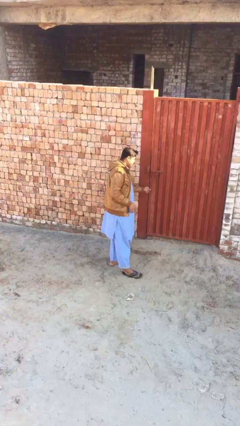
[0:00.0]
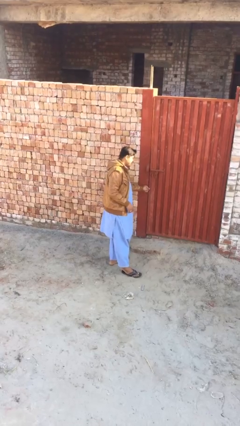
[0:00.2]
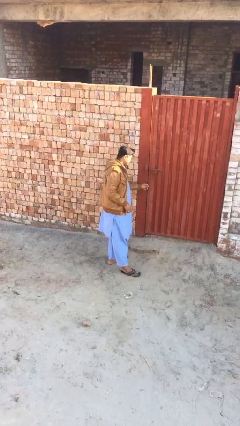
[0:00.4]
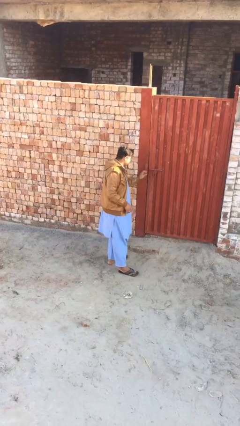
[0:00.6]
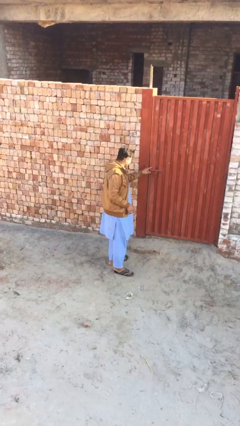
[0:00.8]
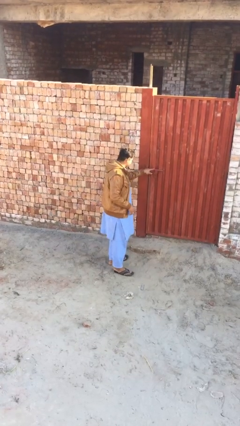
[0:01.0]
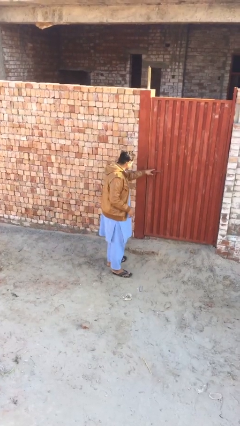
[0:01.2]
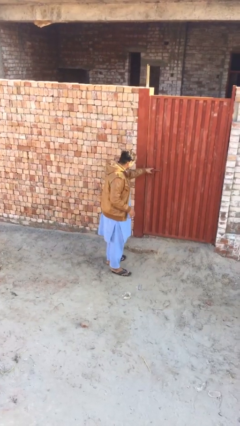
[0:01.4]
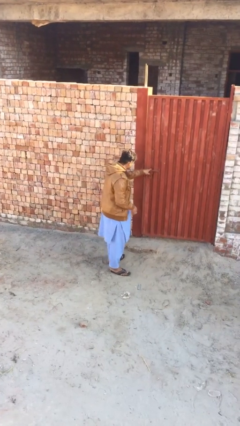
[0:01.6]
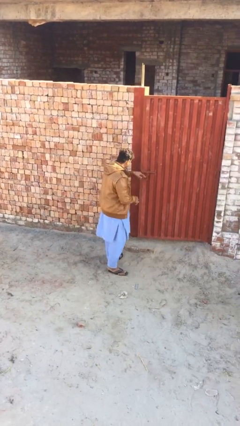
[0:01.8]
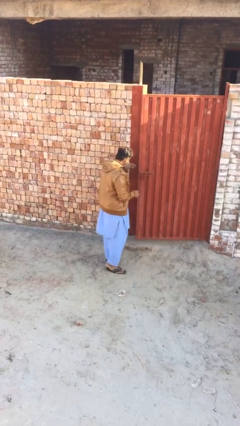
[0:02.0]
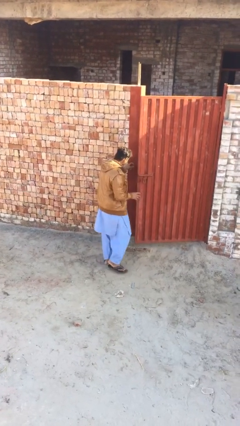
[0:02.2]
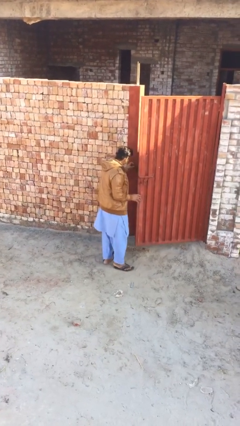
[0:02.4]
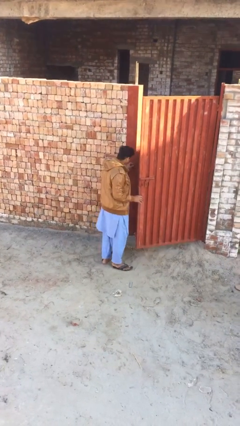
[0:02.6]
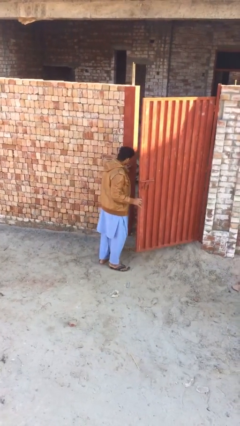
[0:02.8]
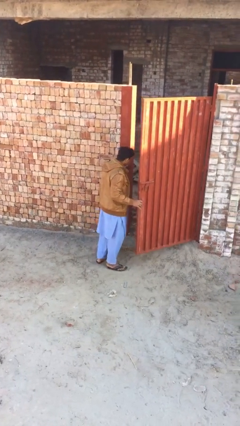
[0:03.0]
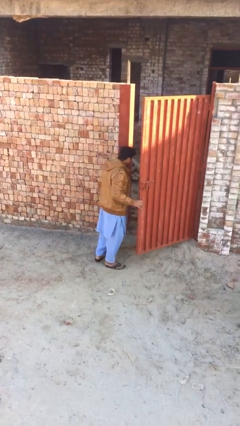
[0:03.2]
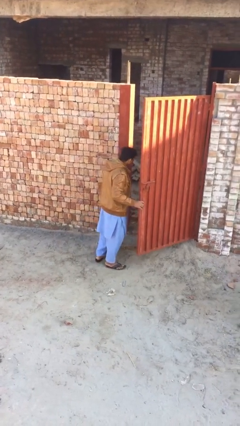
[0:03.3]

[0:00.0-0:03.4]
person opens facility door

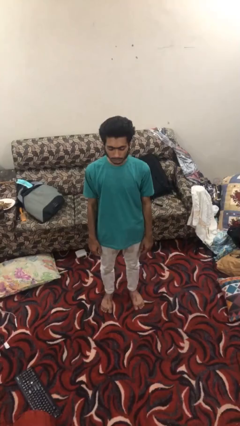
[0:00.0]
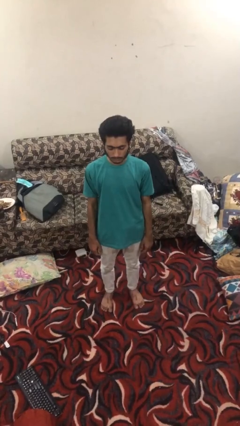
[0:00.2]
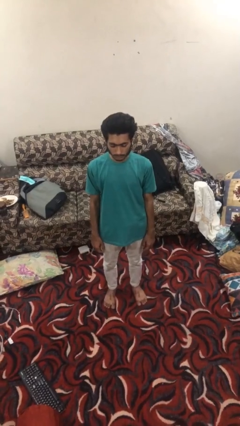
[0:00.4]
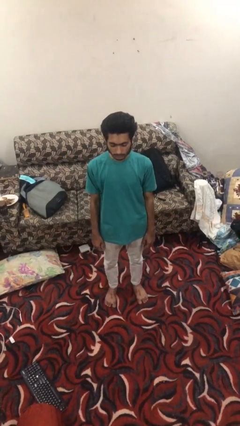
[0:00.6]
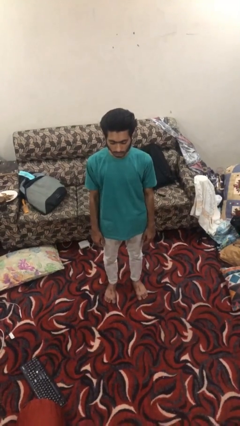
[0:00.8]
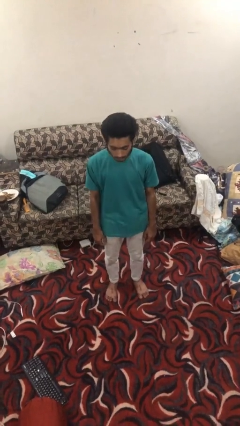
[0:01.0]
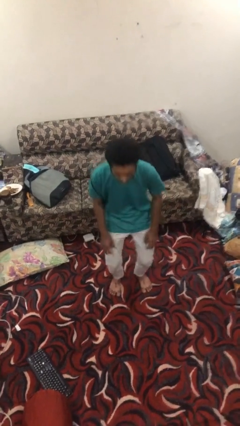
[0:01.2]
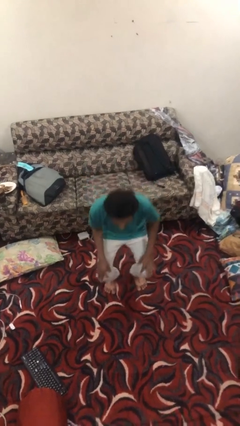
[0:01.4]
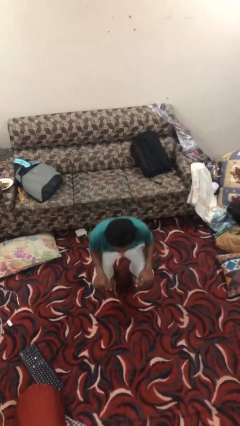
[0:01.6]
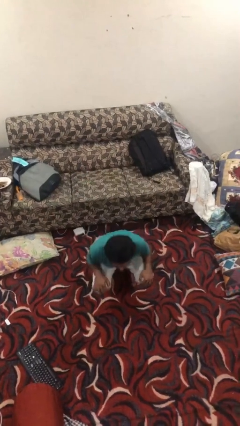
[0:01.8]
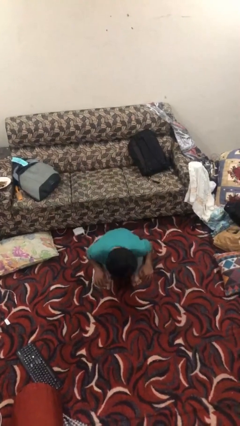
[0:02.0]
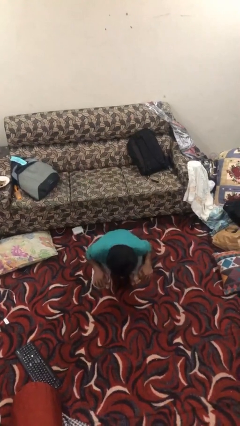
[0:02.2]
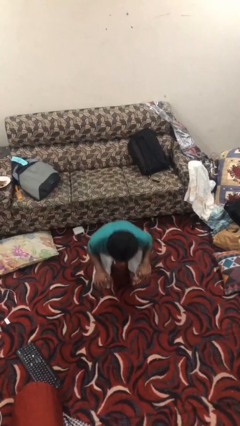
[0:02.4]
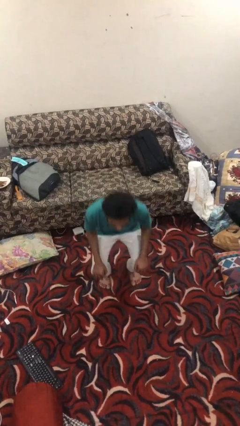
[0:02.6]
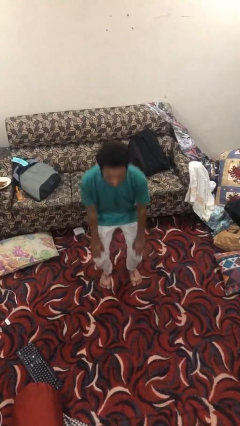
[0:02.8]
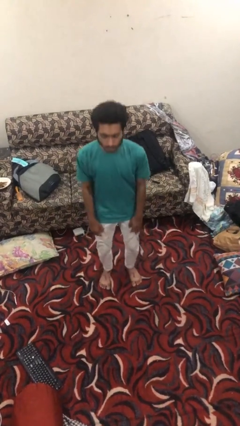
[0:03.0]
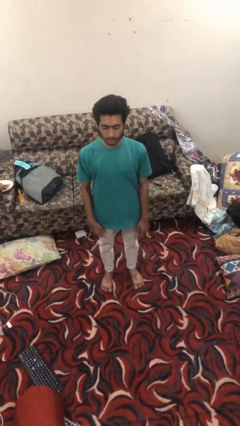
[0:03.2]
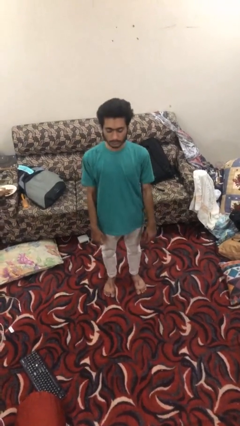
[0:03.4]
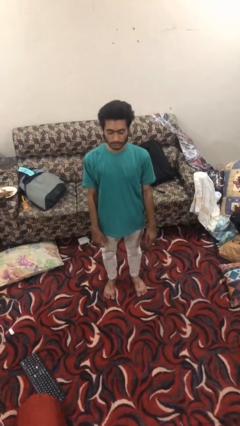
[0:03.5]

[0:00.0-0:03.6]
person exercises with situp

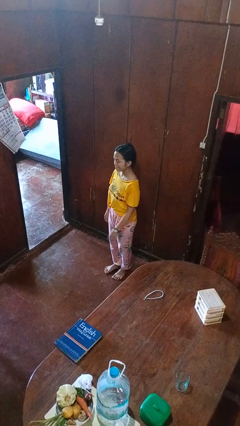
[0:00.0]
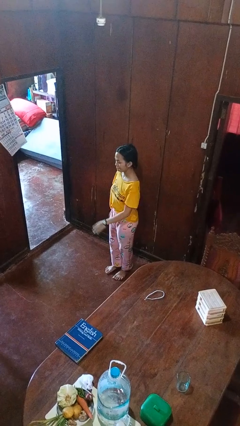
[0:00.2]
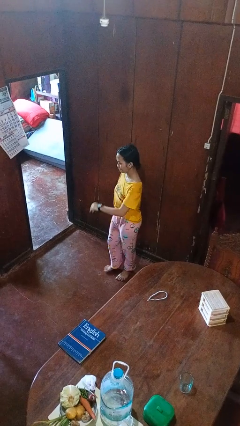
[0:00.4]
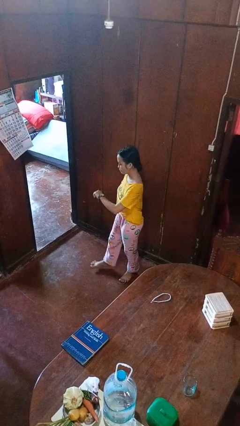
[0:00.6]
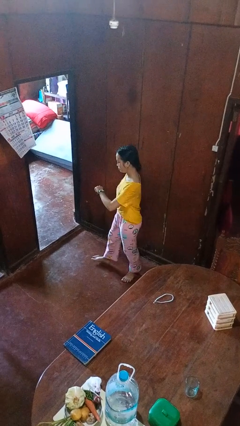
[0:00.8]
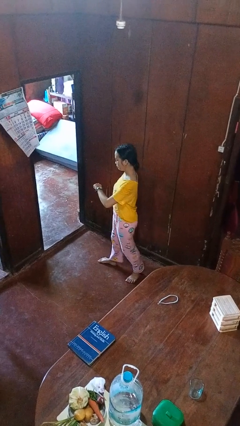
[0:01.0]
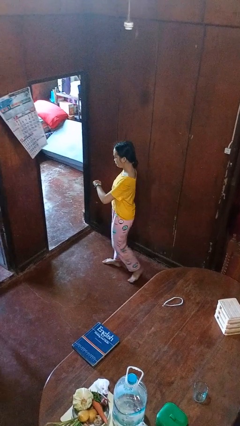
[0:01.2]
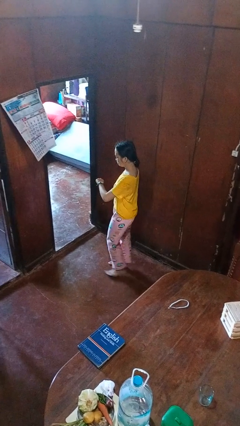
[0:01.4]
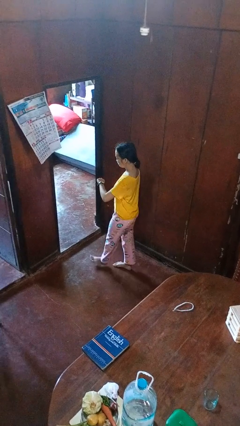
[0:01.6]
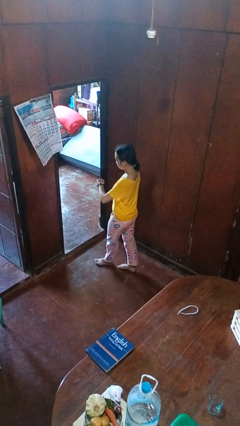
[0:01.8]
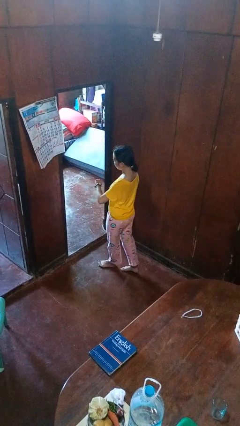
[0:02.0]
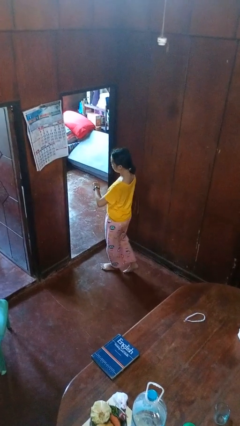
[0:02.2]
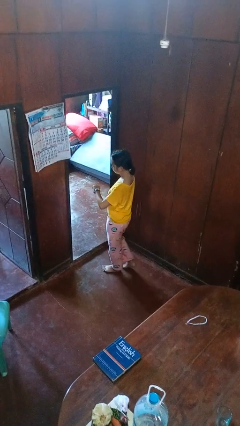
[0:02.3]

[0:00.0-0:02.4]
person looks at wristwatch

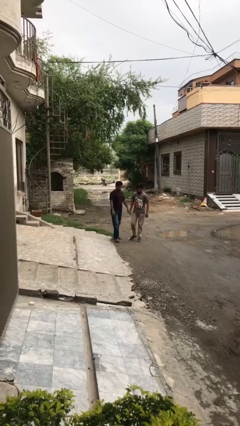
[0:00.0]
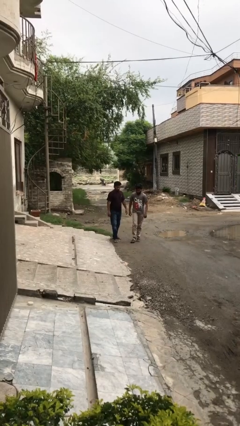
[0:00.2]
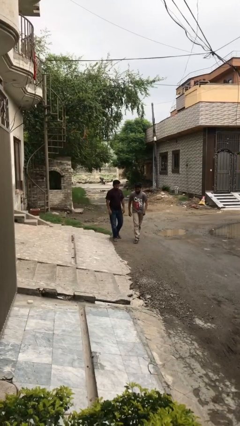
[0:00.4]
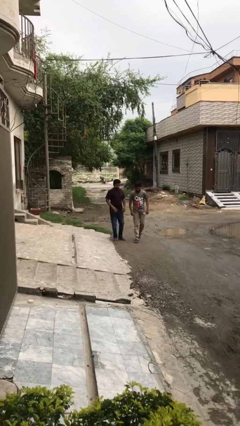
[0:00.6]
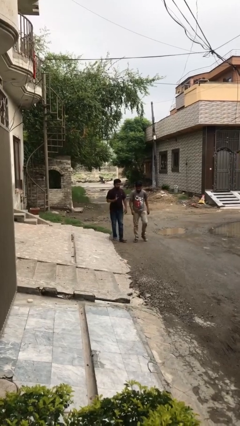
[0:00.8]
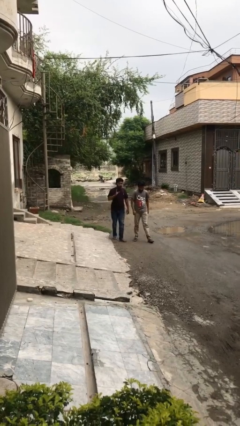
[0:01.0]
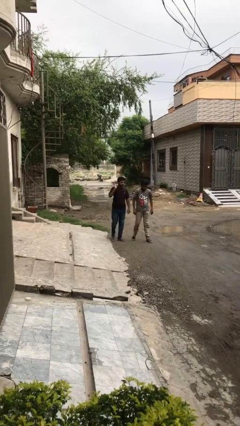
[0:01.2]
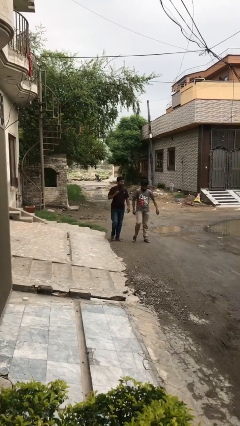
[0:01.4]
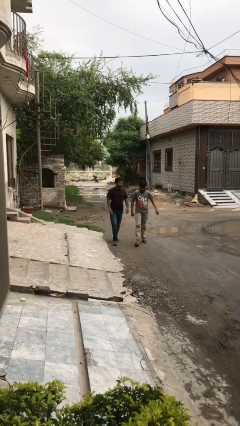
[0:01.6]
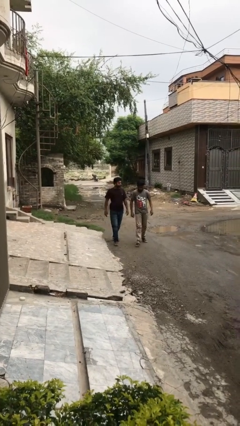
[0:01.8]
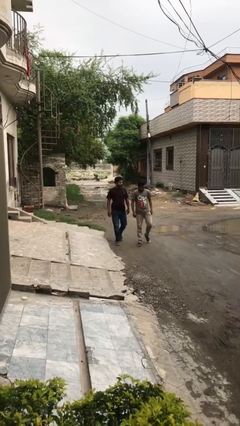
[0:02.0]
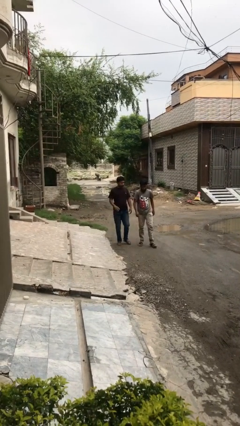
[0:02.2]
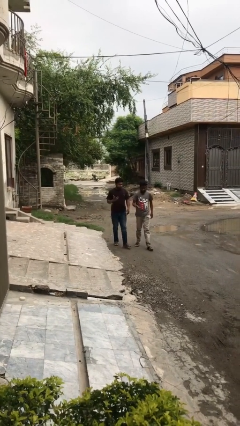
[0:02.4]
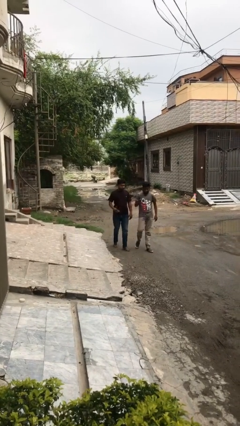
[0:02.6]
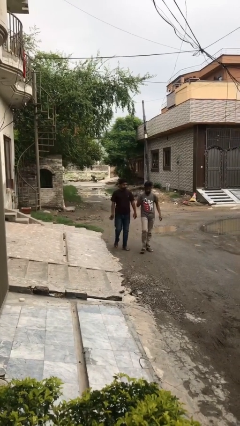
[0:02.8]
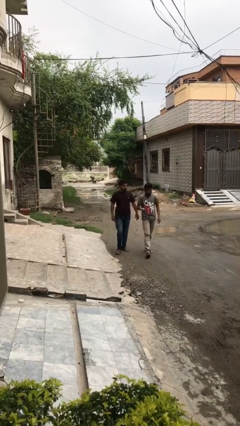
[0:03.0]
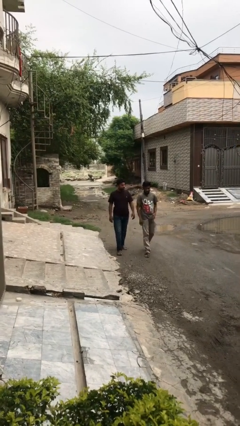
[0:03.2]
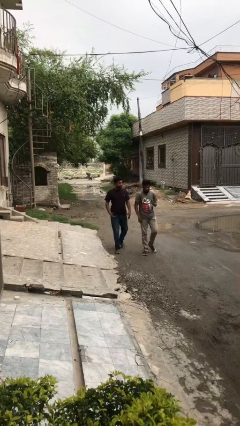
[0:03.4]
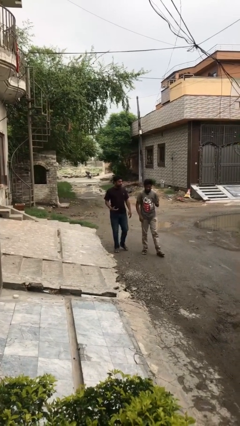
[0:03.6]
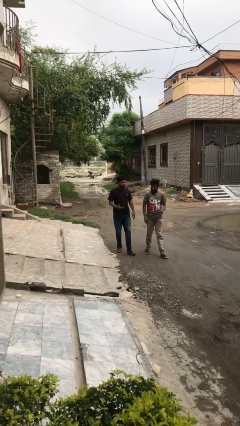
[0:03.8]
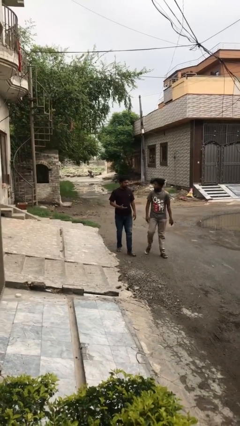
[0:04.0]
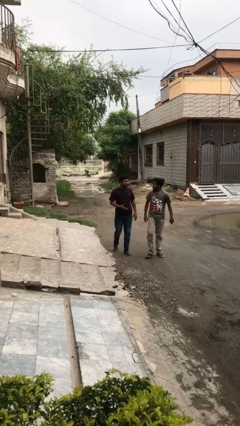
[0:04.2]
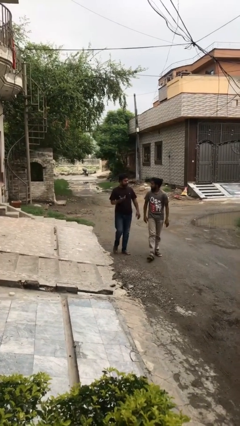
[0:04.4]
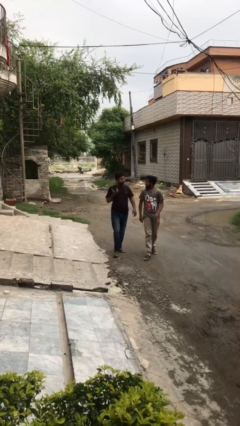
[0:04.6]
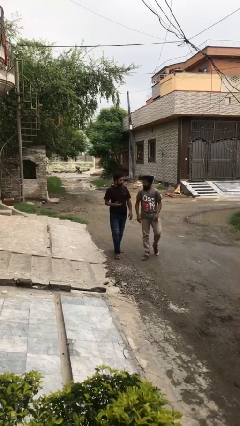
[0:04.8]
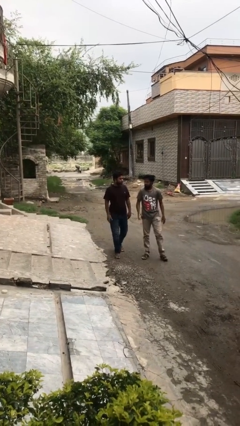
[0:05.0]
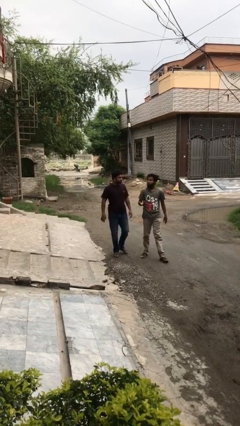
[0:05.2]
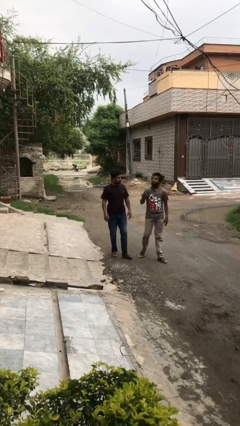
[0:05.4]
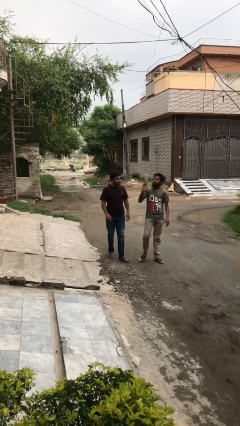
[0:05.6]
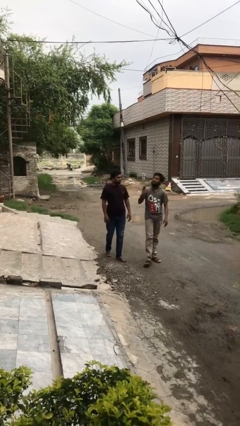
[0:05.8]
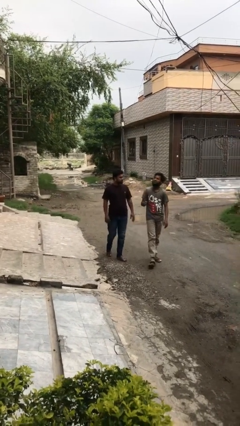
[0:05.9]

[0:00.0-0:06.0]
person talks to person

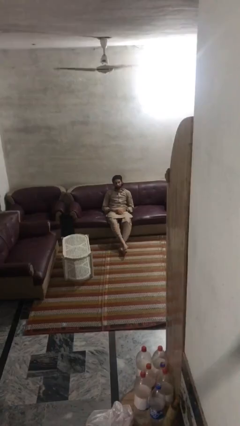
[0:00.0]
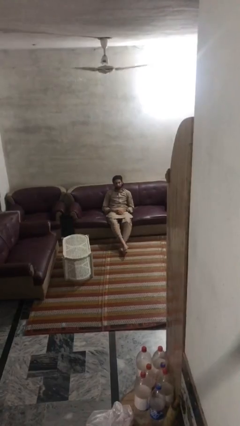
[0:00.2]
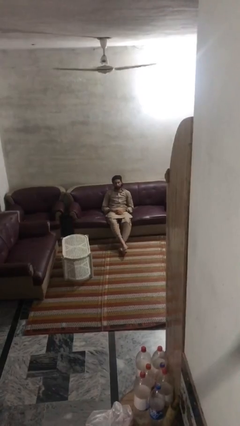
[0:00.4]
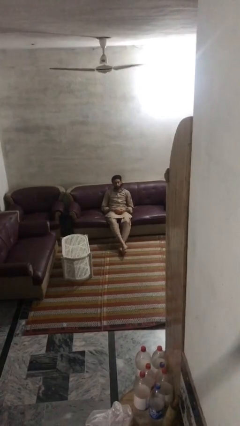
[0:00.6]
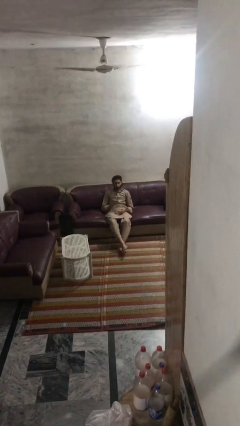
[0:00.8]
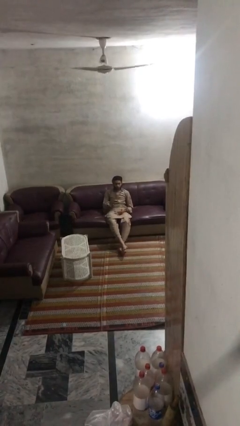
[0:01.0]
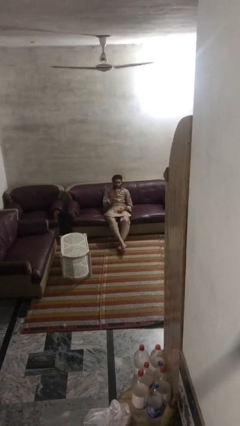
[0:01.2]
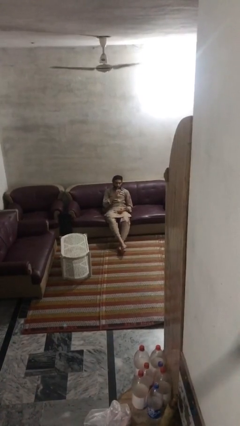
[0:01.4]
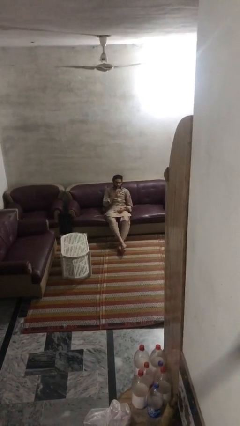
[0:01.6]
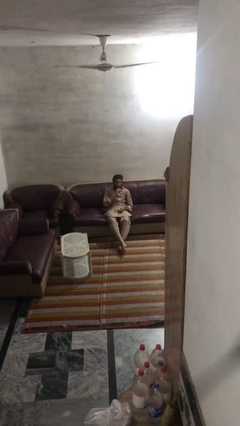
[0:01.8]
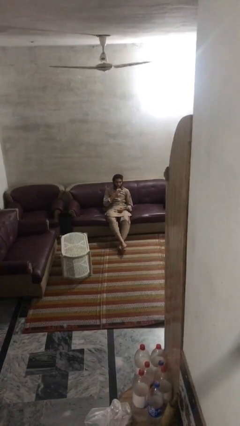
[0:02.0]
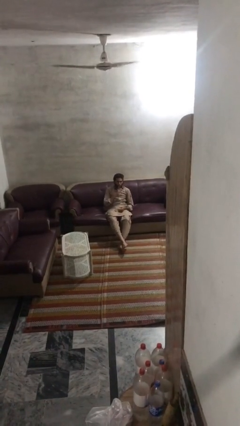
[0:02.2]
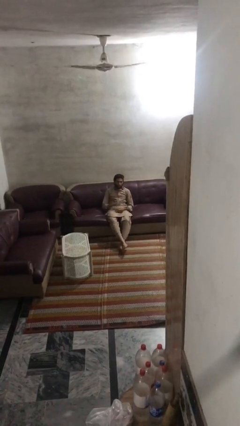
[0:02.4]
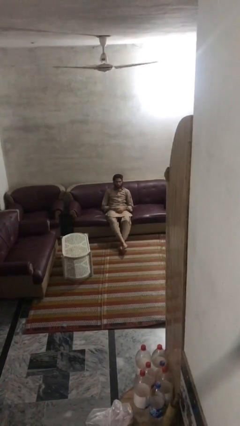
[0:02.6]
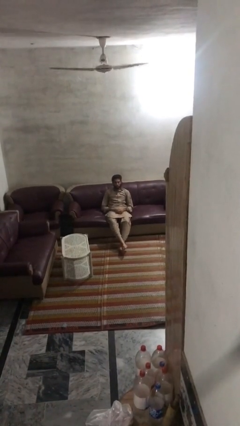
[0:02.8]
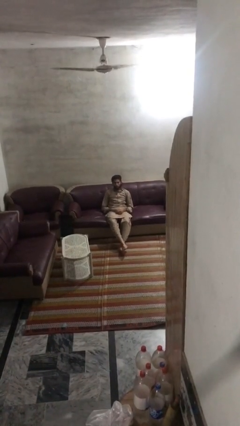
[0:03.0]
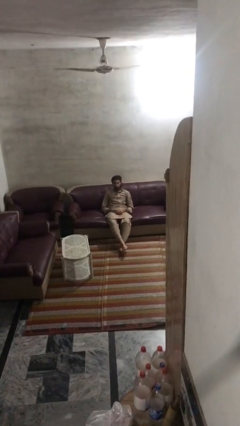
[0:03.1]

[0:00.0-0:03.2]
person gestures be quiet
